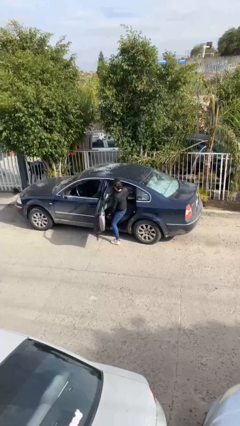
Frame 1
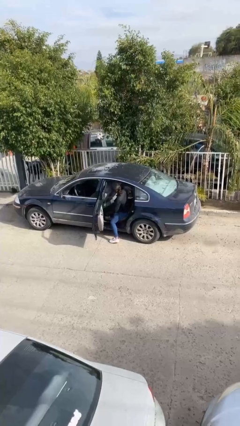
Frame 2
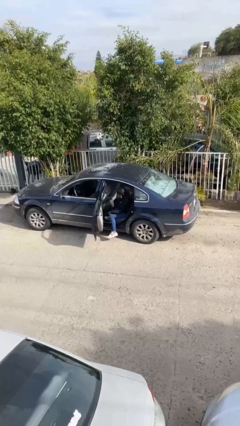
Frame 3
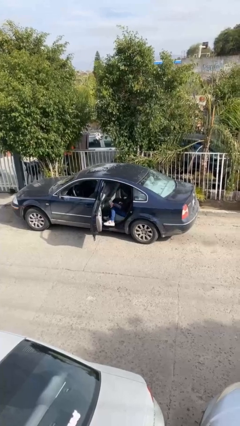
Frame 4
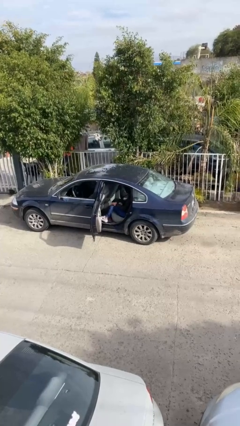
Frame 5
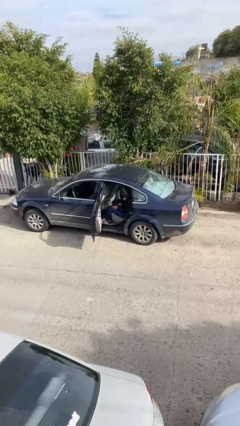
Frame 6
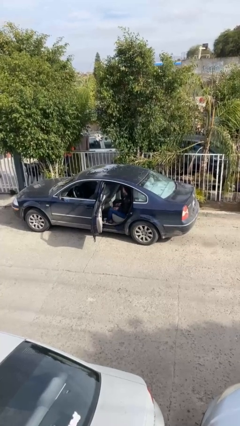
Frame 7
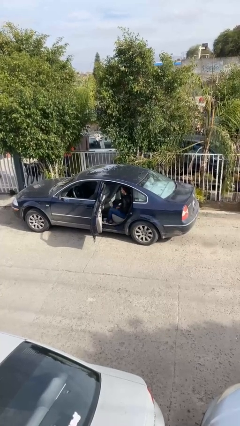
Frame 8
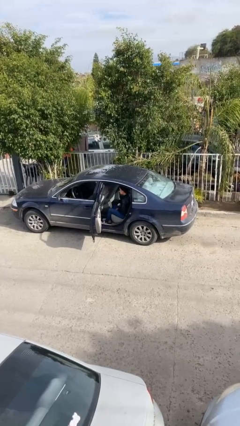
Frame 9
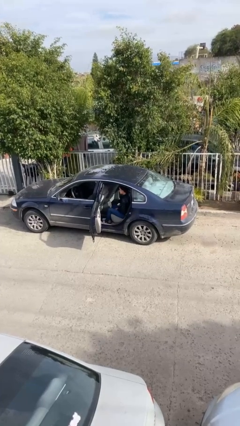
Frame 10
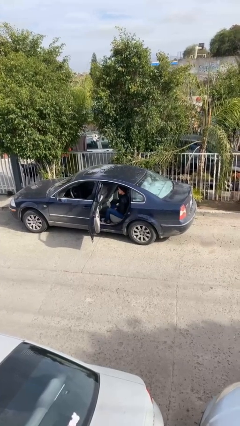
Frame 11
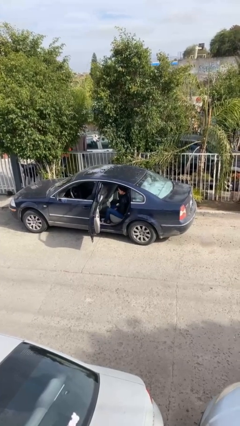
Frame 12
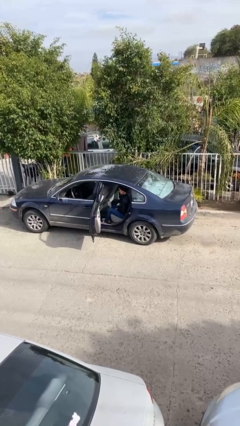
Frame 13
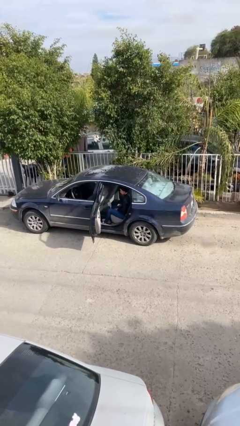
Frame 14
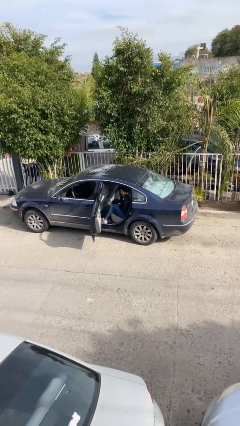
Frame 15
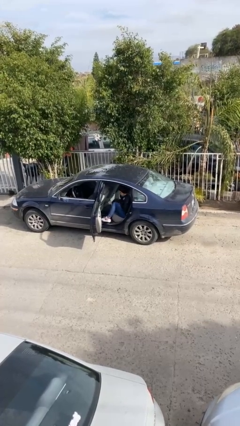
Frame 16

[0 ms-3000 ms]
person enters car

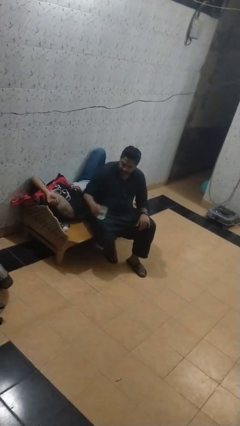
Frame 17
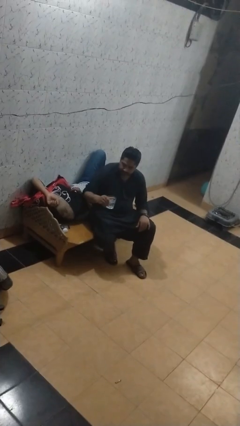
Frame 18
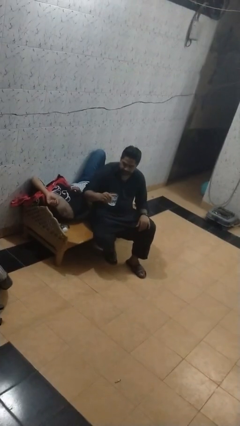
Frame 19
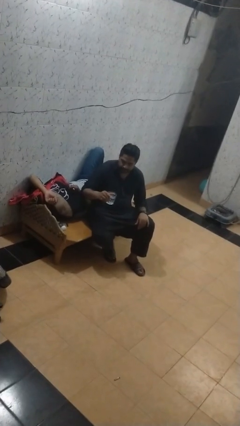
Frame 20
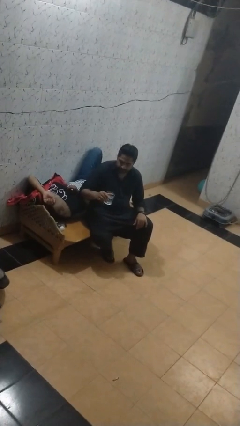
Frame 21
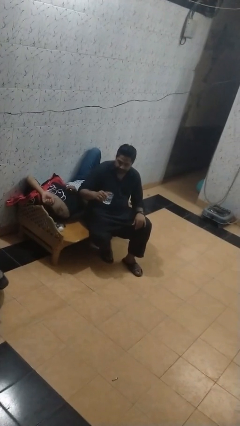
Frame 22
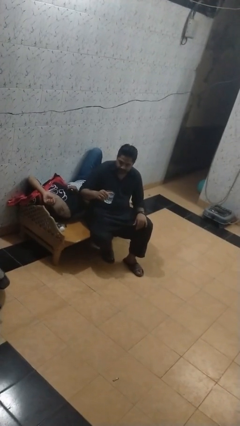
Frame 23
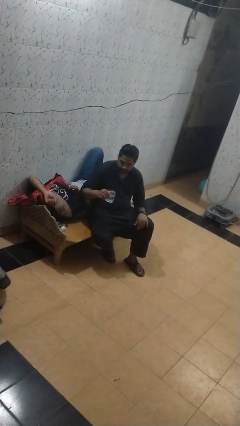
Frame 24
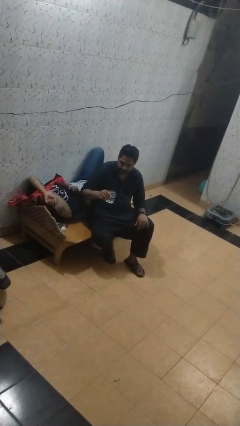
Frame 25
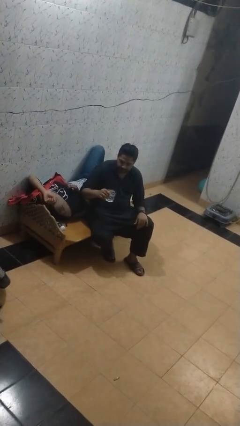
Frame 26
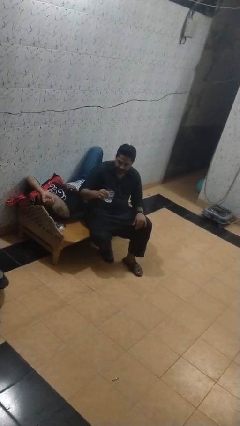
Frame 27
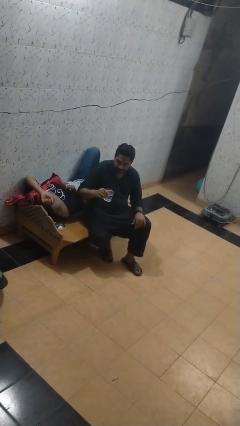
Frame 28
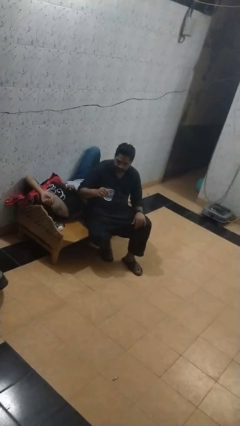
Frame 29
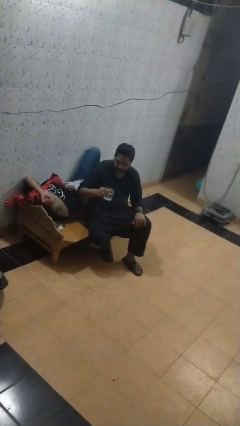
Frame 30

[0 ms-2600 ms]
person picks up object from table

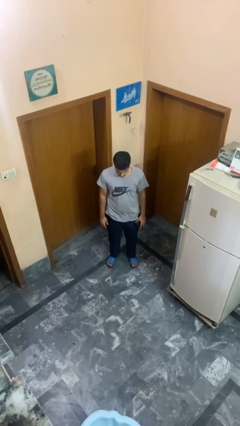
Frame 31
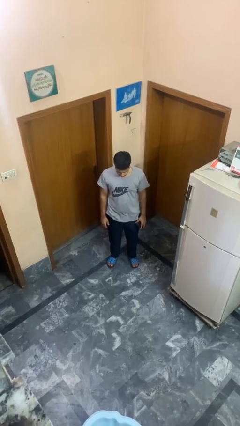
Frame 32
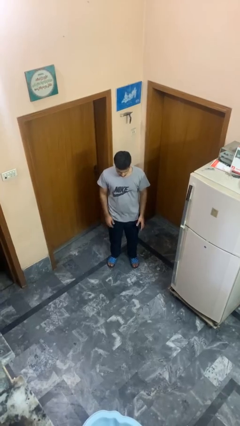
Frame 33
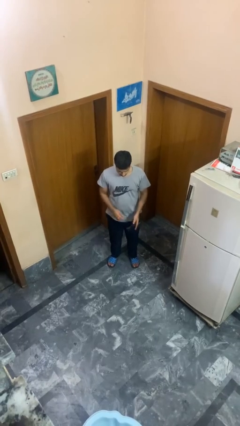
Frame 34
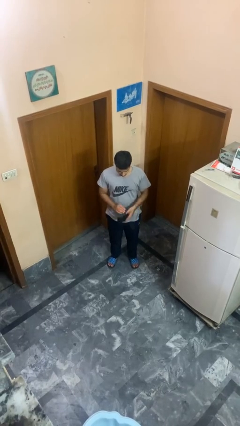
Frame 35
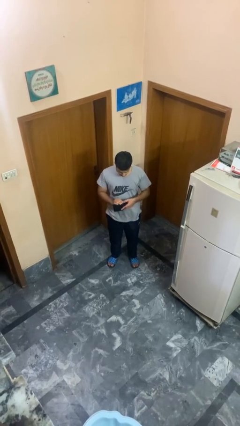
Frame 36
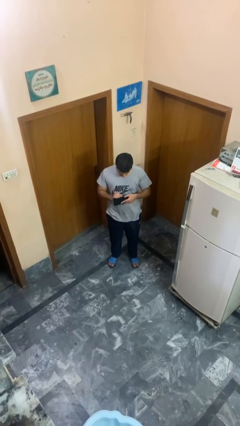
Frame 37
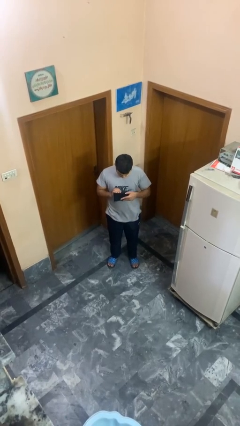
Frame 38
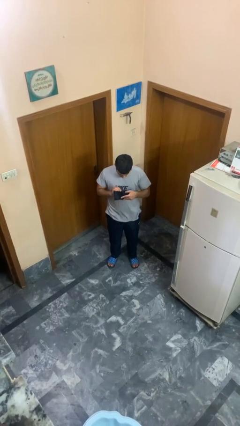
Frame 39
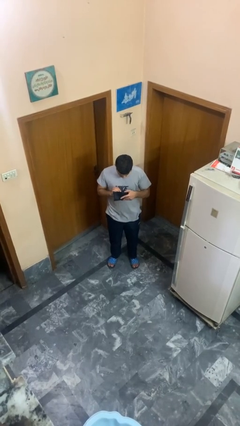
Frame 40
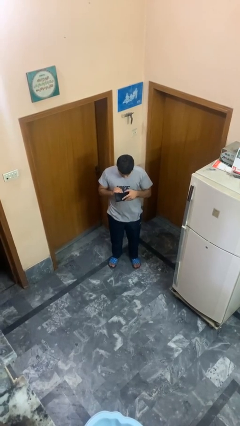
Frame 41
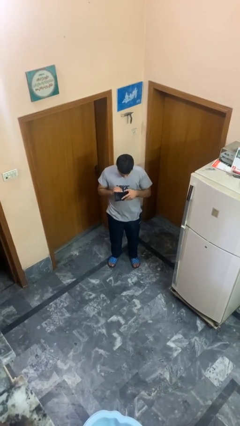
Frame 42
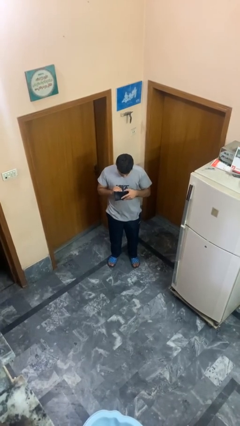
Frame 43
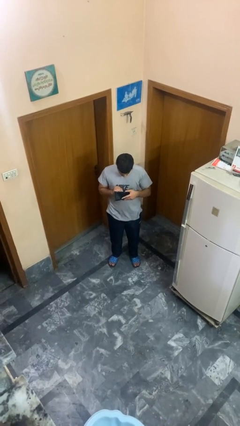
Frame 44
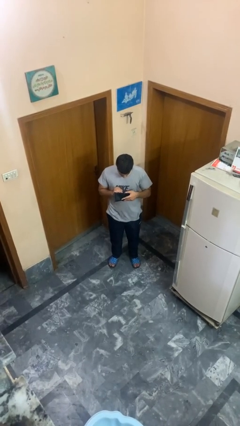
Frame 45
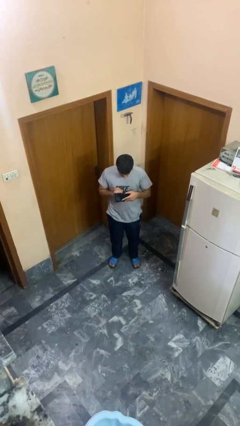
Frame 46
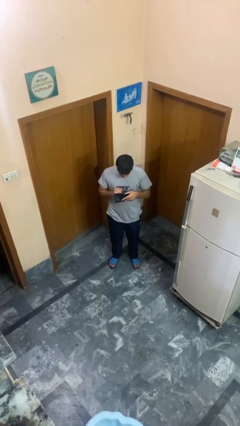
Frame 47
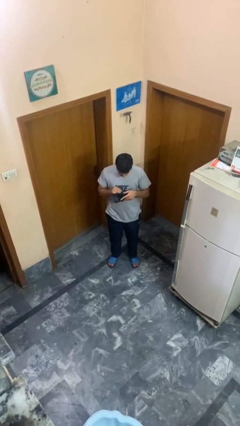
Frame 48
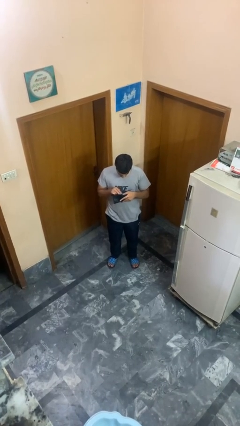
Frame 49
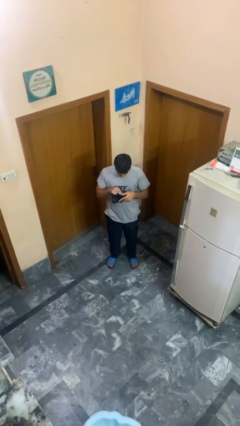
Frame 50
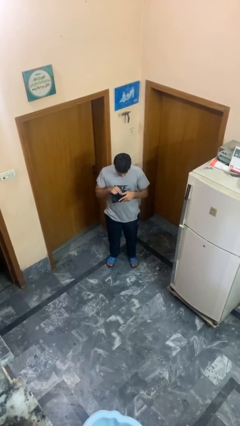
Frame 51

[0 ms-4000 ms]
person searches in purse

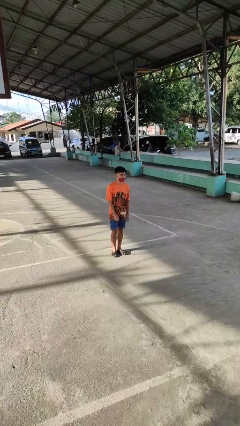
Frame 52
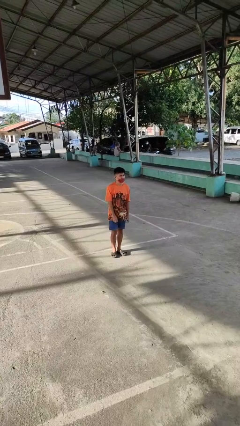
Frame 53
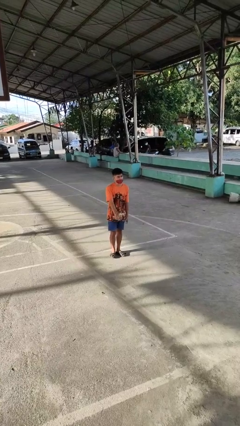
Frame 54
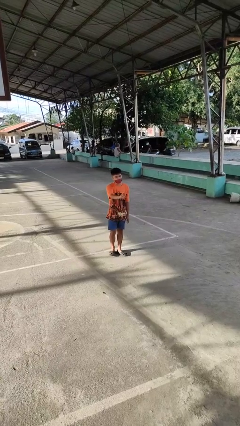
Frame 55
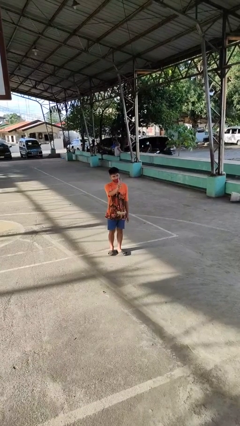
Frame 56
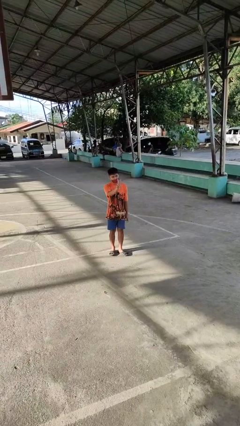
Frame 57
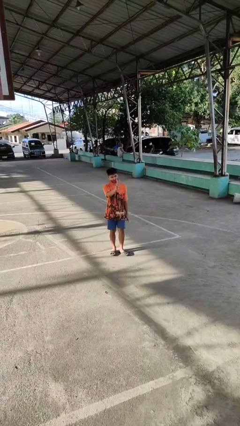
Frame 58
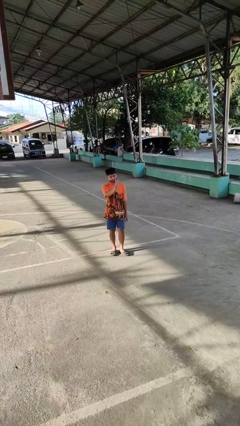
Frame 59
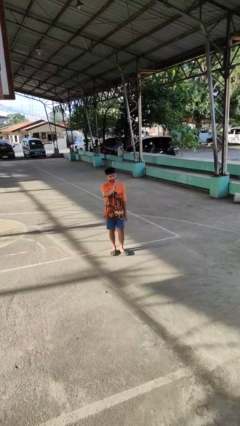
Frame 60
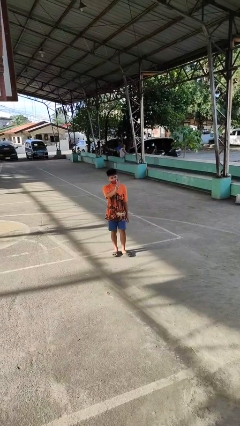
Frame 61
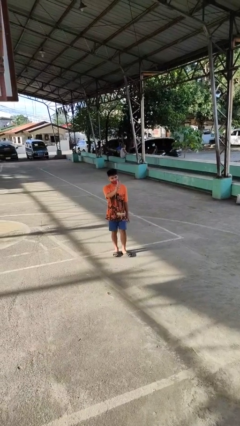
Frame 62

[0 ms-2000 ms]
person gestures peace

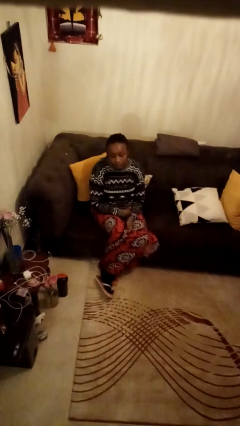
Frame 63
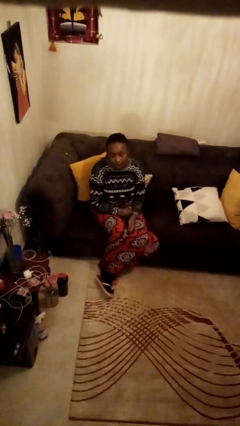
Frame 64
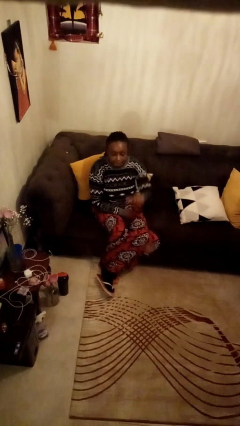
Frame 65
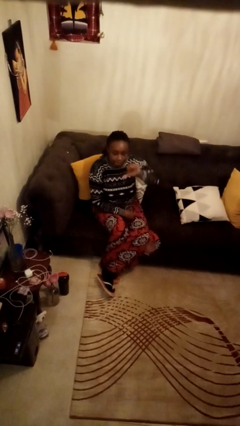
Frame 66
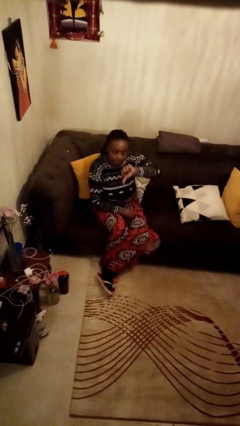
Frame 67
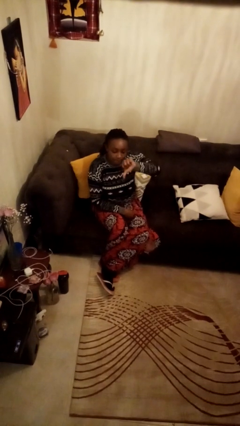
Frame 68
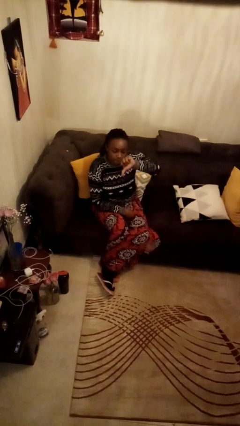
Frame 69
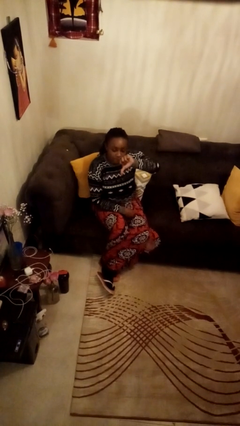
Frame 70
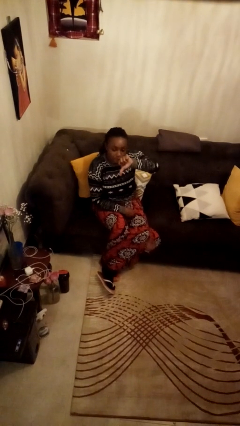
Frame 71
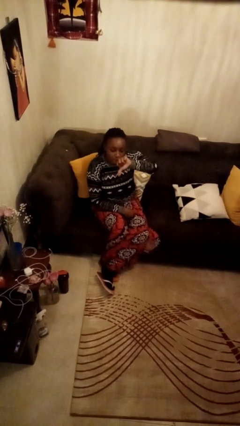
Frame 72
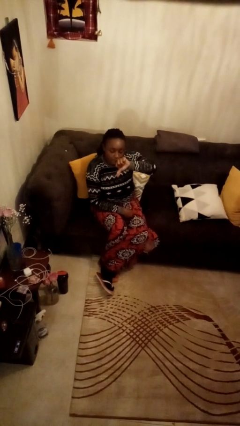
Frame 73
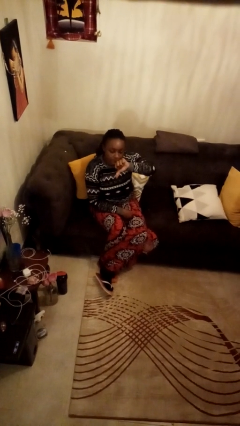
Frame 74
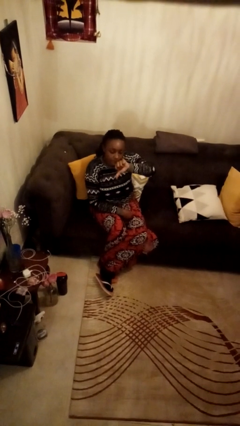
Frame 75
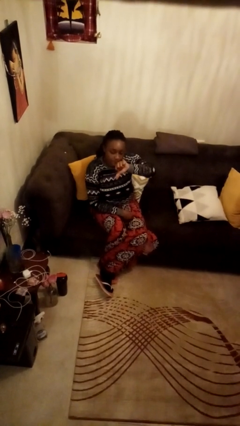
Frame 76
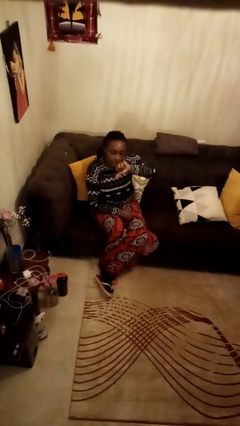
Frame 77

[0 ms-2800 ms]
person gestures thumbs down

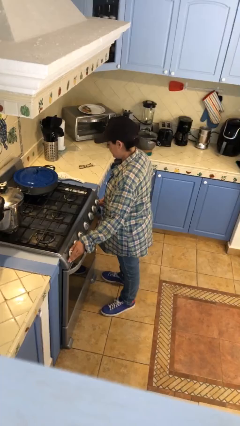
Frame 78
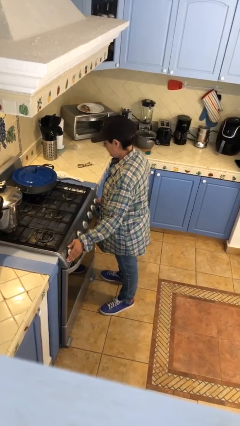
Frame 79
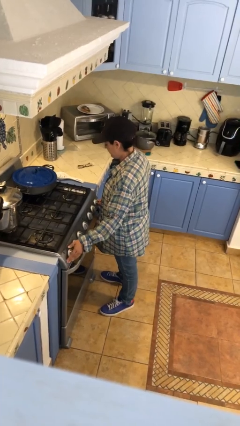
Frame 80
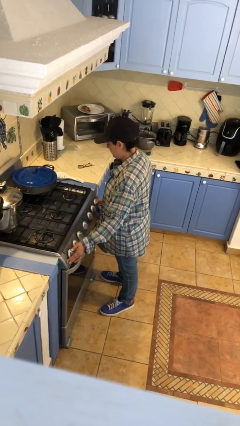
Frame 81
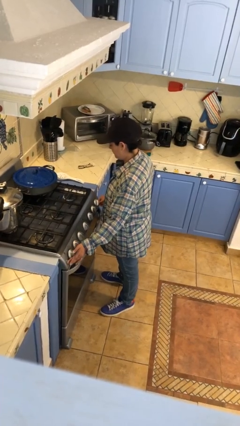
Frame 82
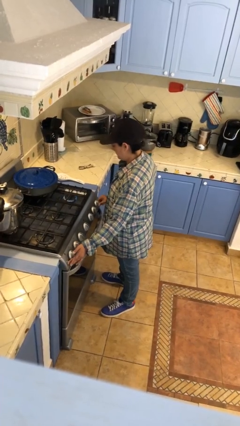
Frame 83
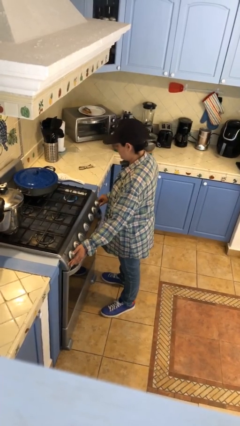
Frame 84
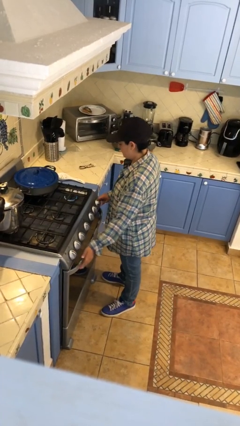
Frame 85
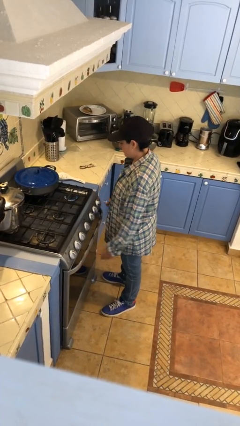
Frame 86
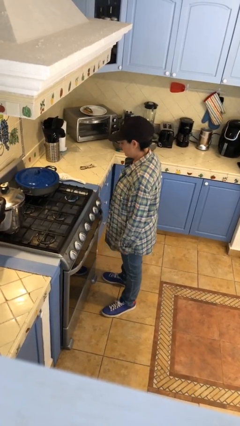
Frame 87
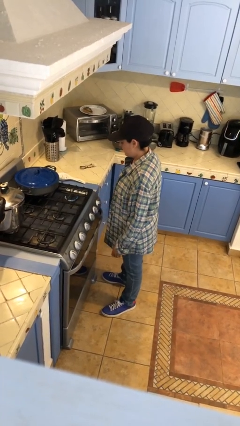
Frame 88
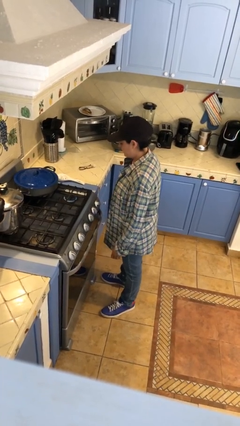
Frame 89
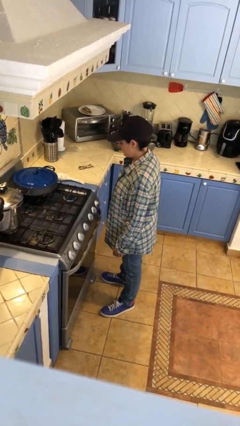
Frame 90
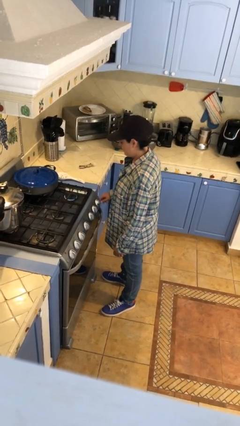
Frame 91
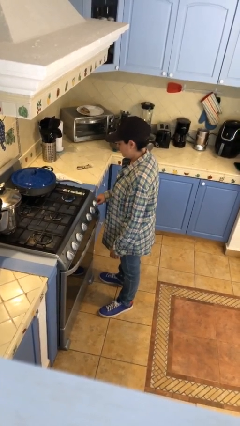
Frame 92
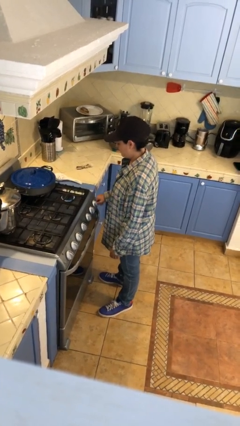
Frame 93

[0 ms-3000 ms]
person turns on stovetop
